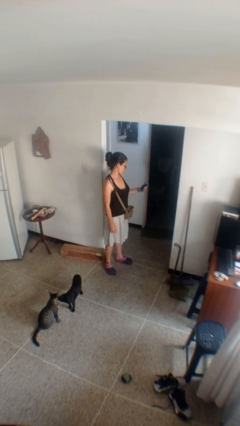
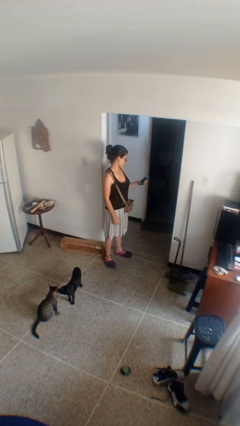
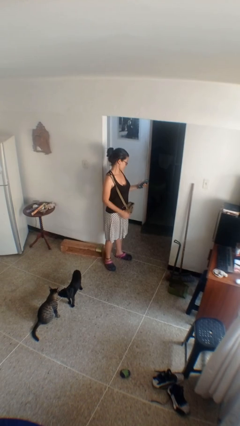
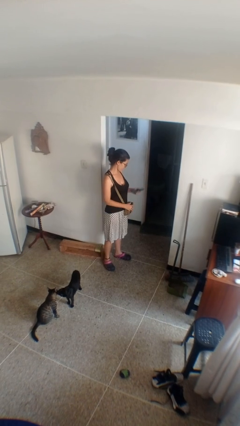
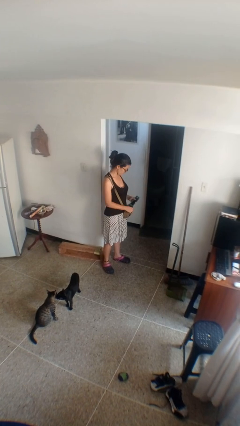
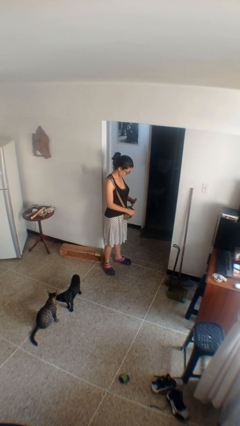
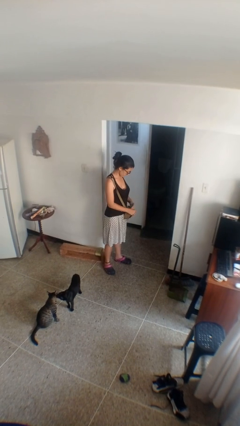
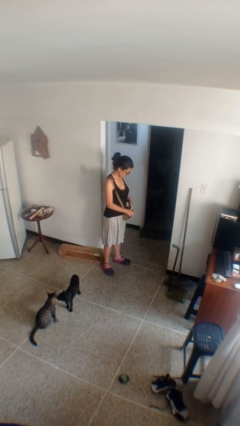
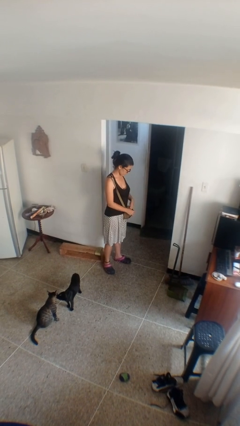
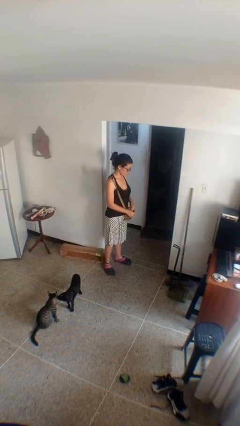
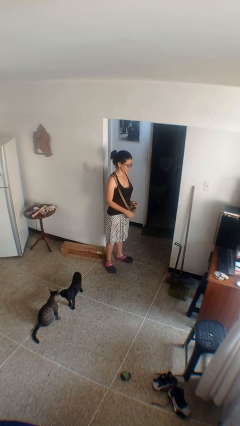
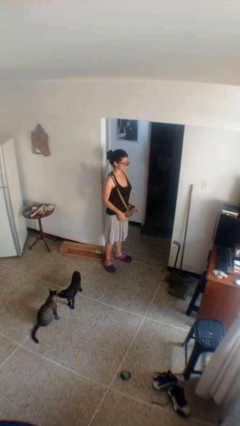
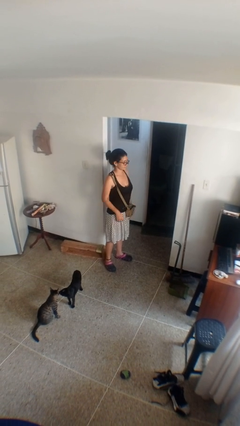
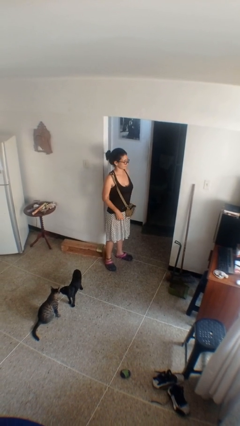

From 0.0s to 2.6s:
person puts phone into pocket

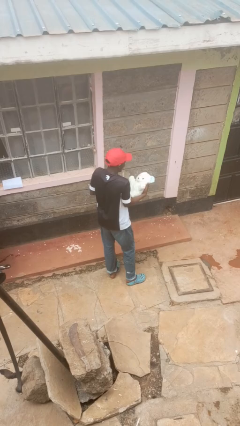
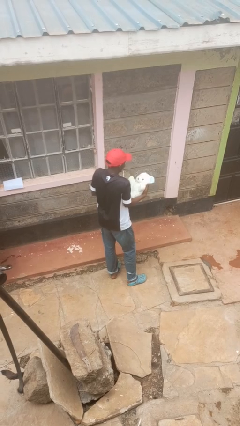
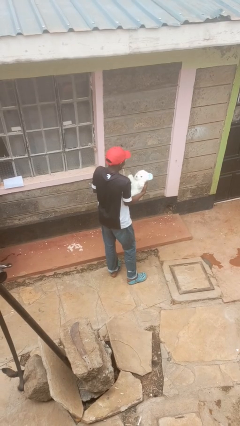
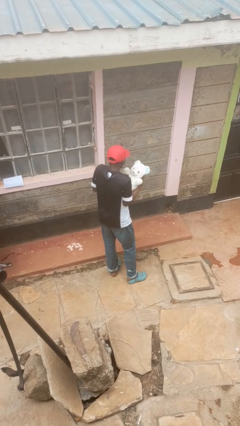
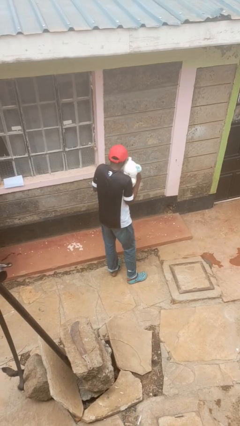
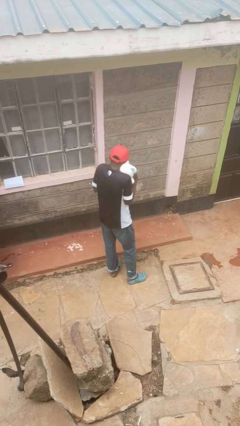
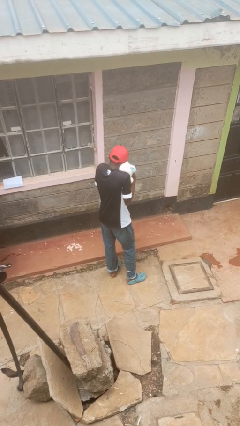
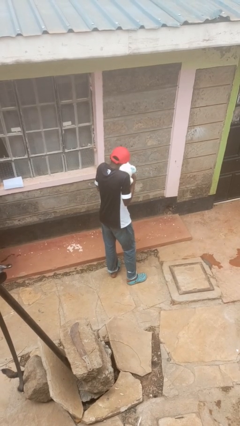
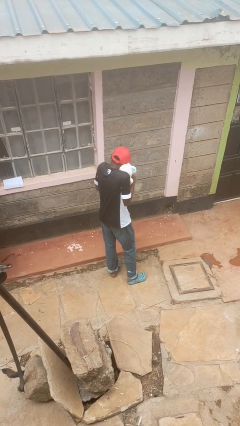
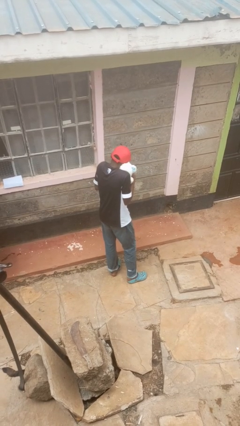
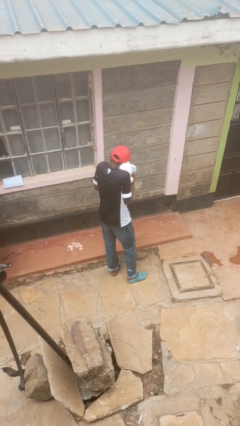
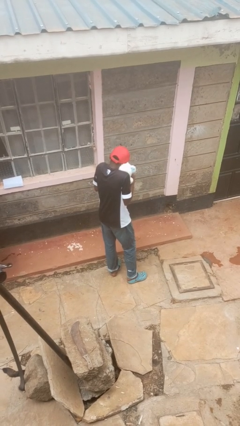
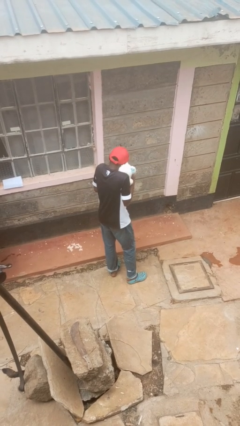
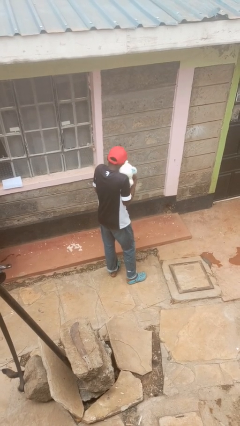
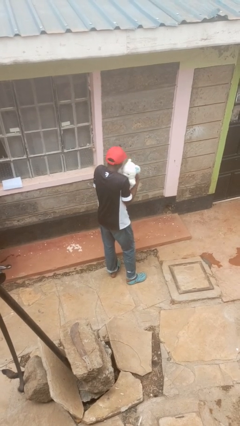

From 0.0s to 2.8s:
person hugs stuffed animal

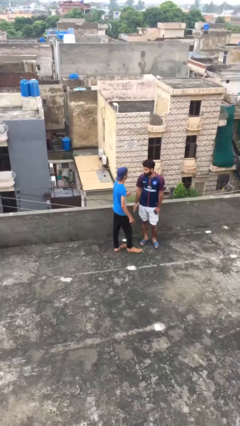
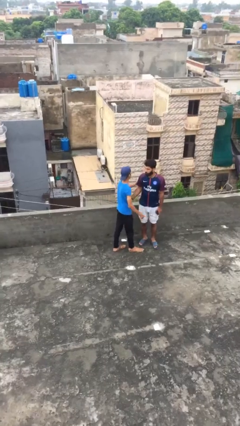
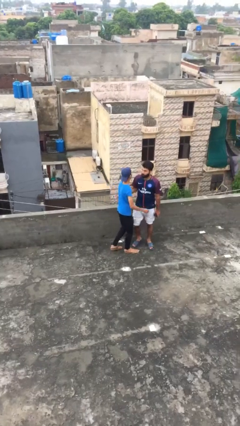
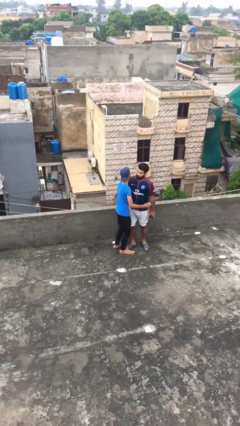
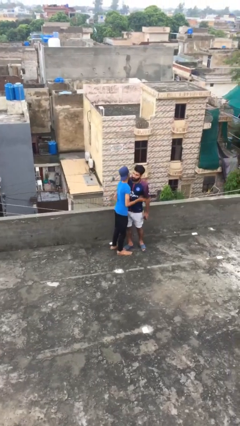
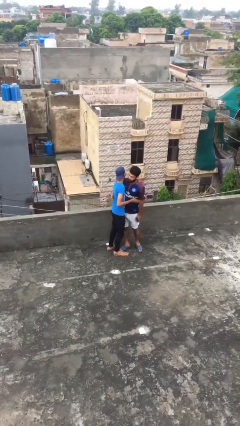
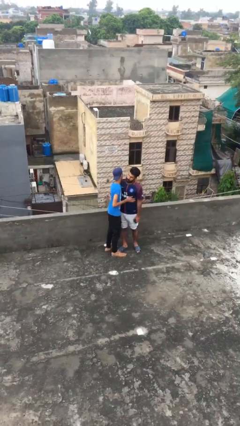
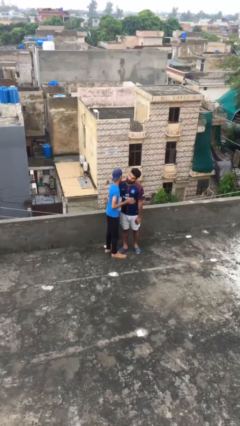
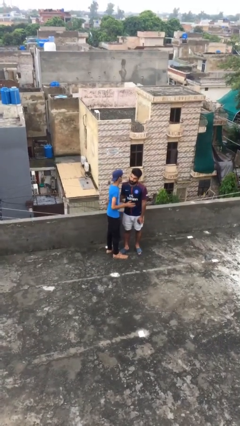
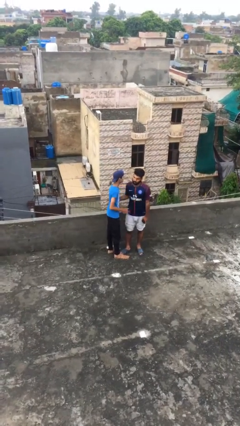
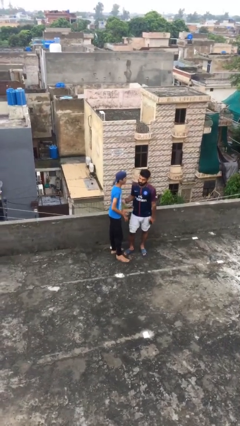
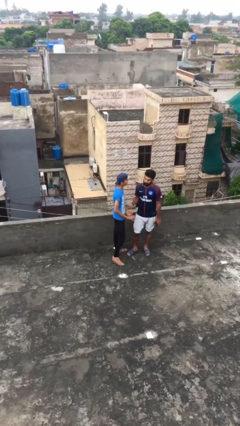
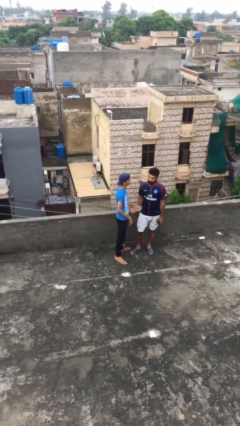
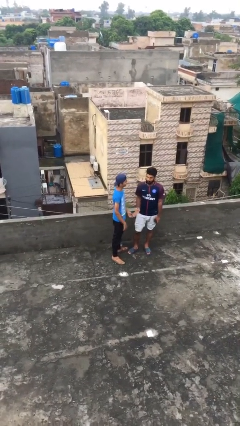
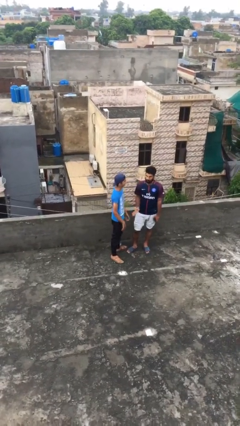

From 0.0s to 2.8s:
person embraces person

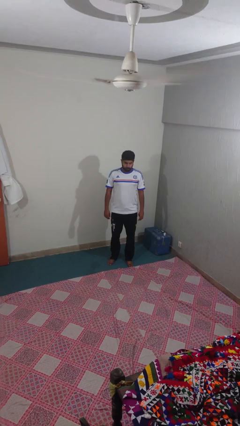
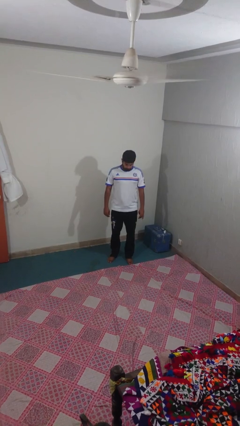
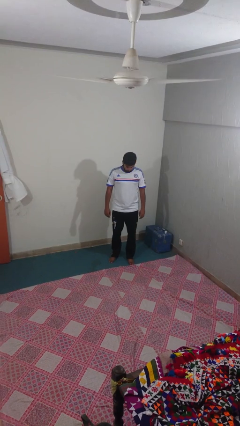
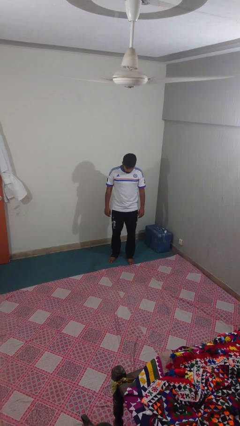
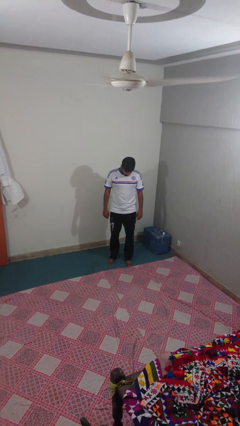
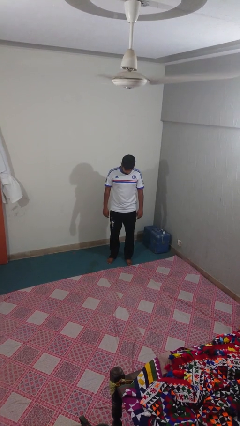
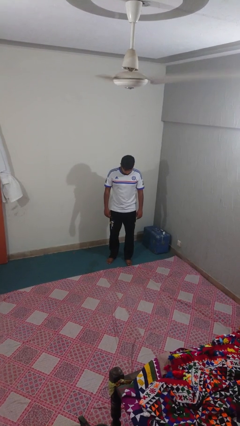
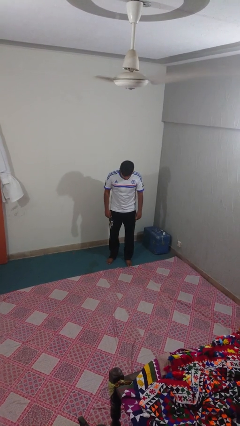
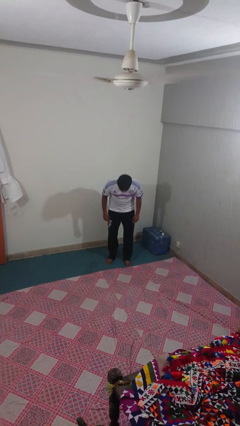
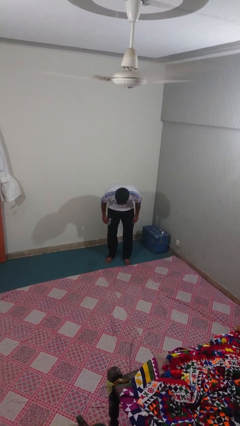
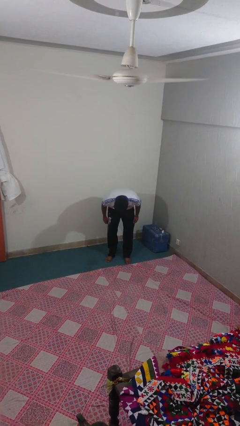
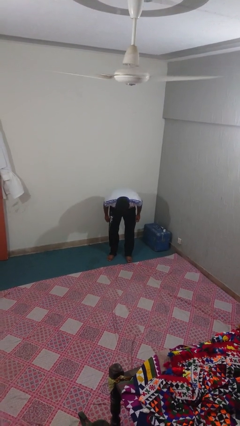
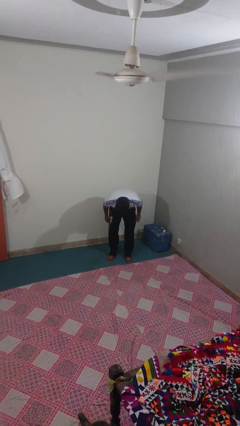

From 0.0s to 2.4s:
person bows

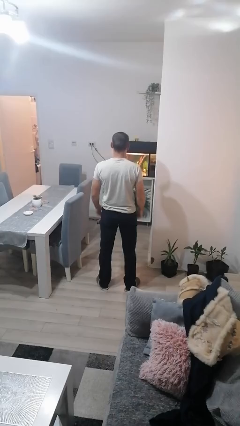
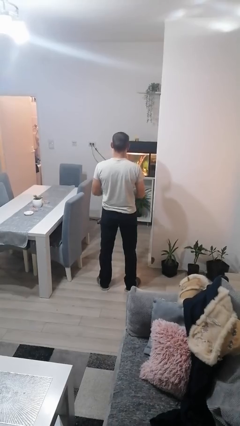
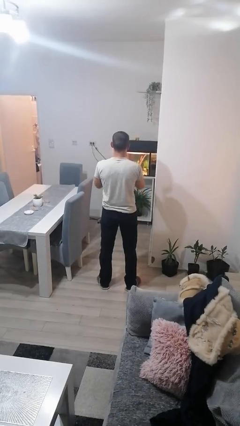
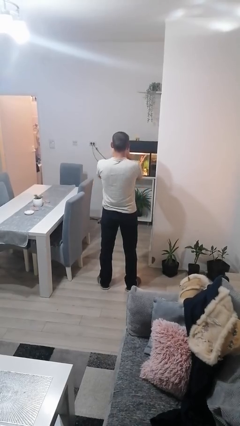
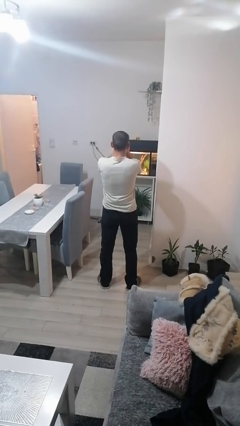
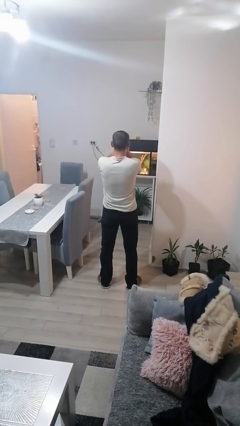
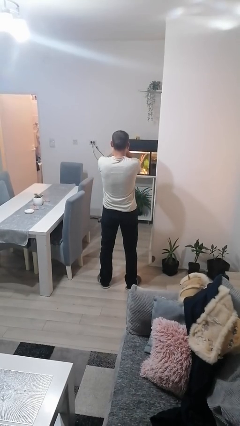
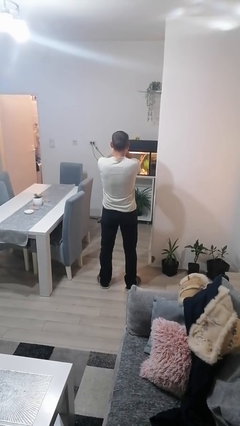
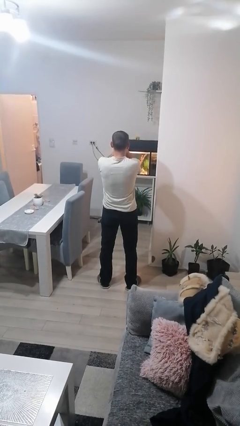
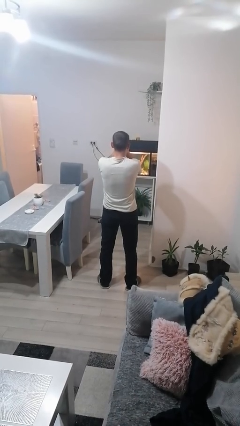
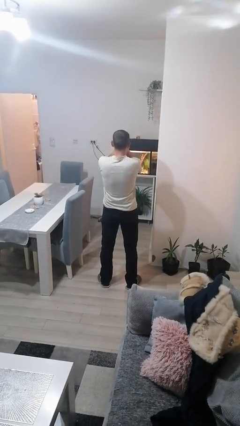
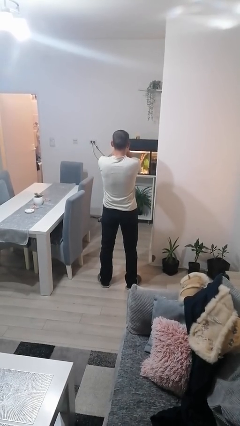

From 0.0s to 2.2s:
person covers face with hands

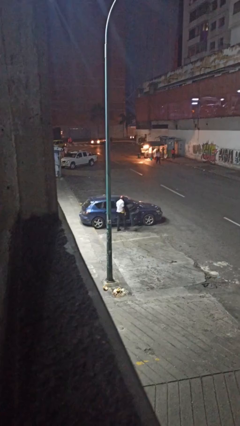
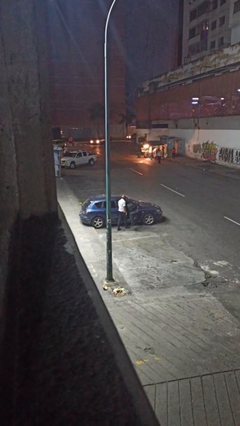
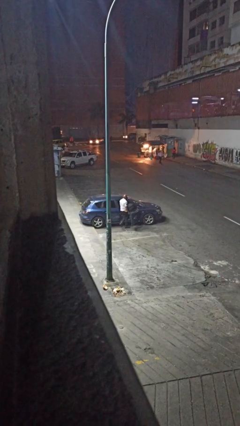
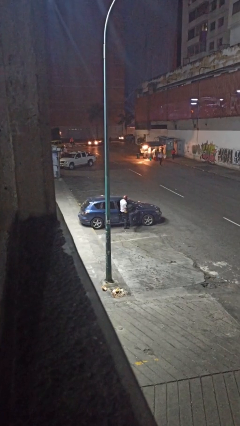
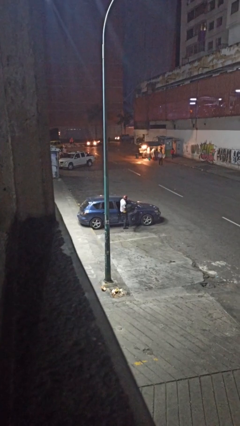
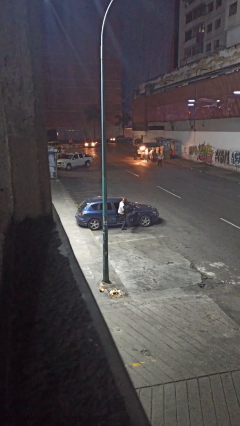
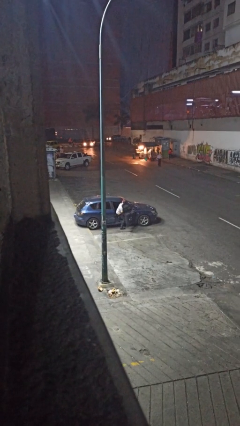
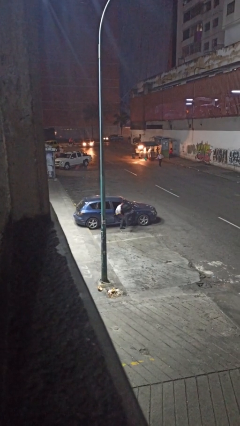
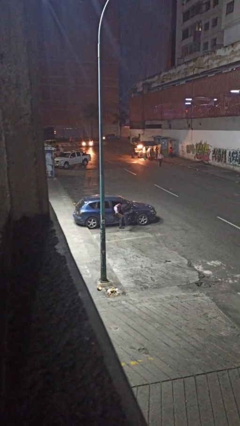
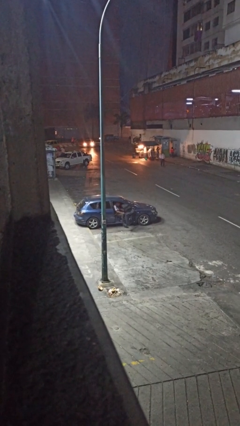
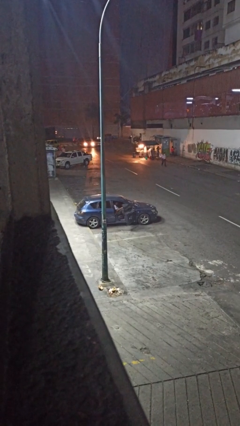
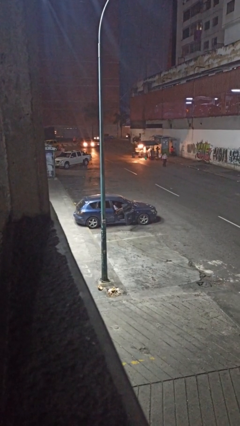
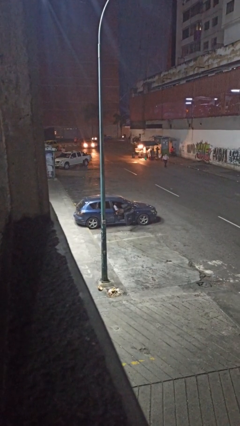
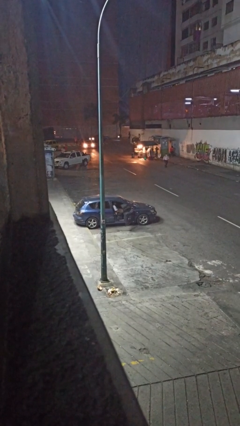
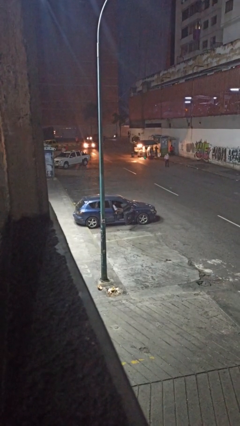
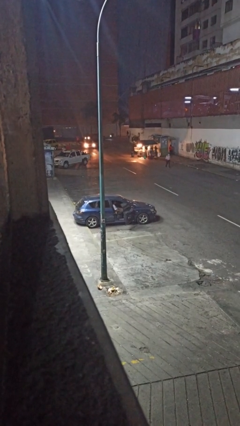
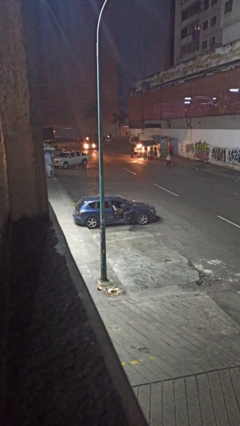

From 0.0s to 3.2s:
person enters car

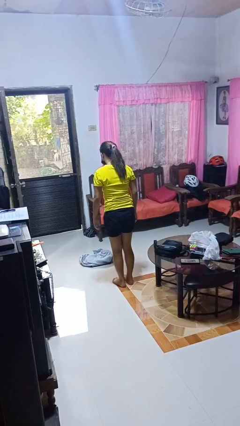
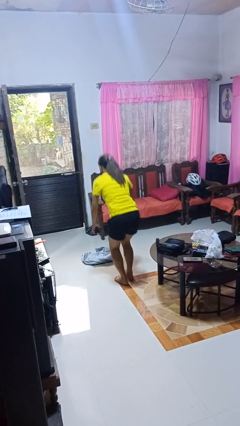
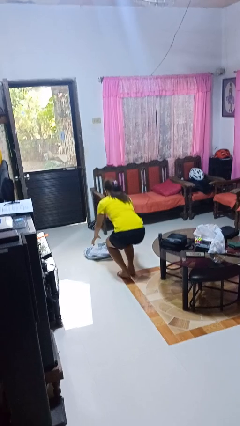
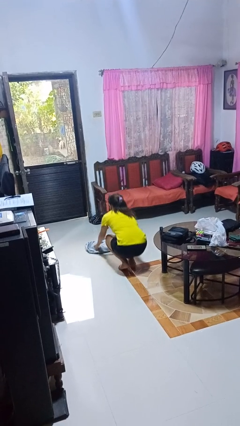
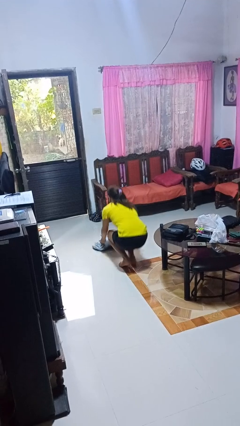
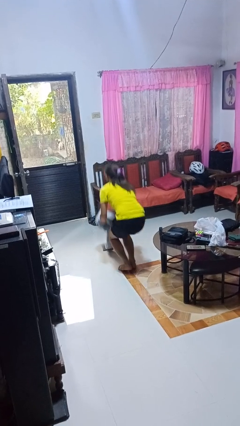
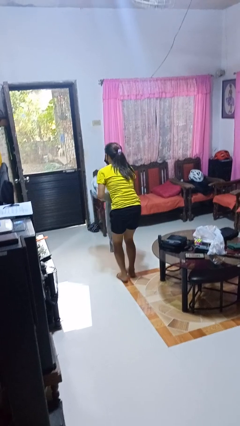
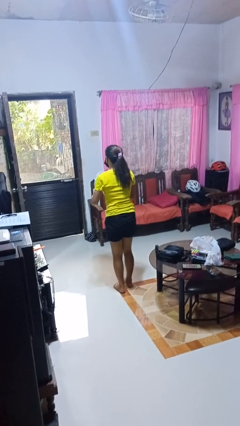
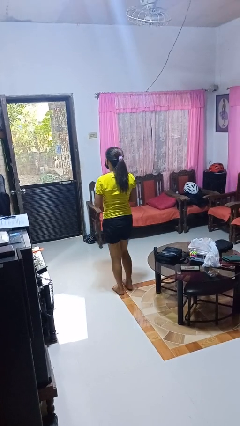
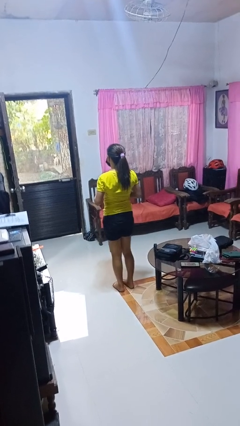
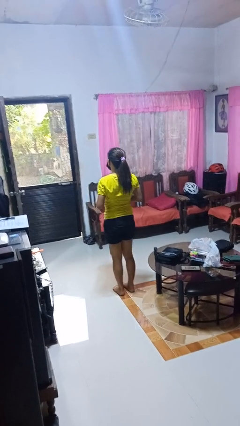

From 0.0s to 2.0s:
person picks up object from floor
